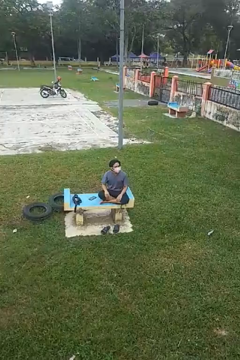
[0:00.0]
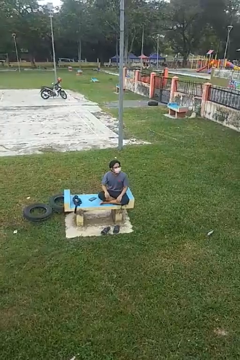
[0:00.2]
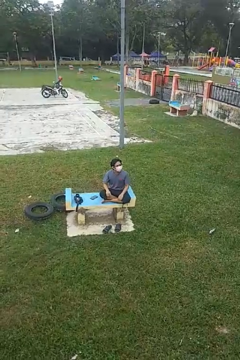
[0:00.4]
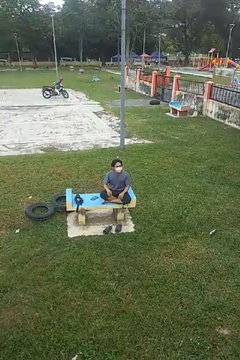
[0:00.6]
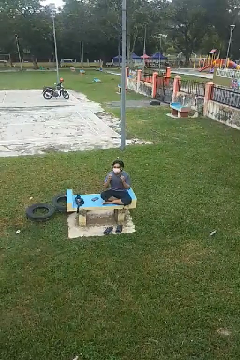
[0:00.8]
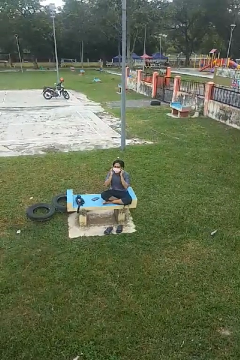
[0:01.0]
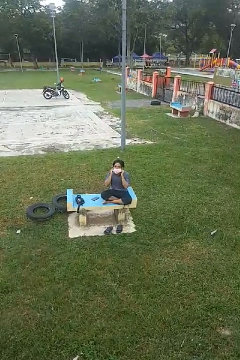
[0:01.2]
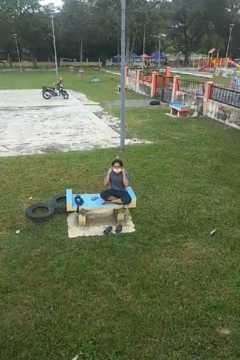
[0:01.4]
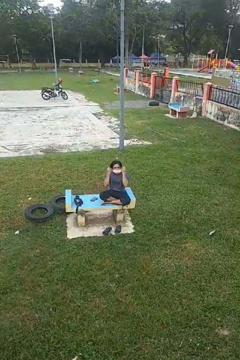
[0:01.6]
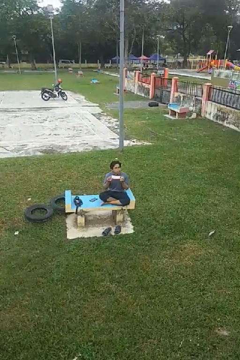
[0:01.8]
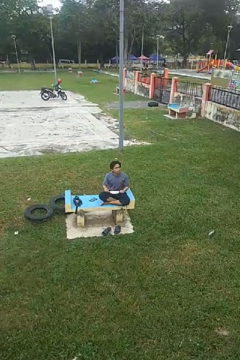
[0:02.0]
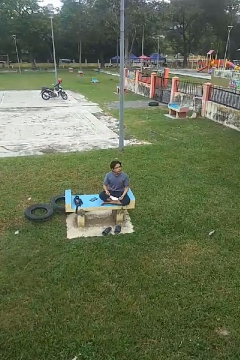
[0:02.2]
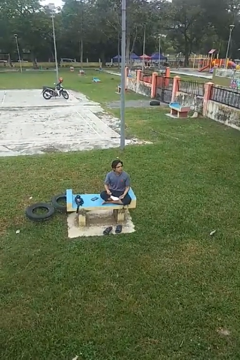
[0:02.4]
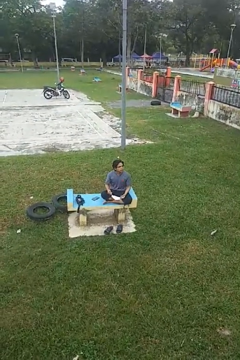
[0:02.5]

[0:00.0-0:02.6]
person takes off facemask

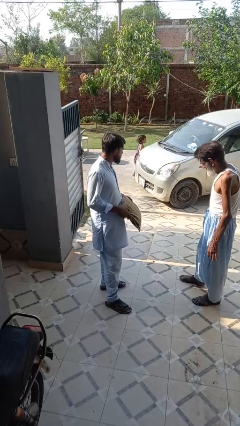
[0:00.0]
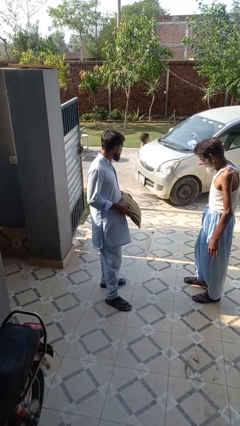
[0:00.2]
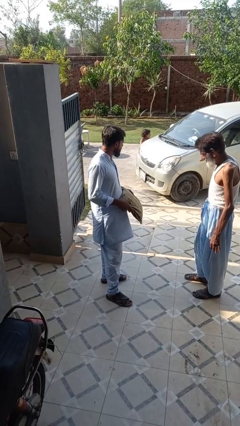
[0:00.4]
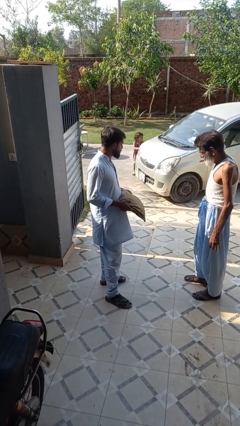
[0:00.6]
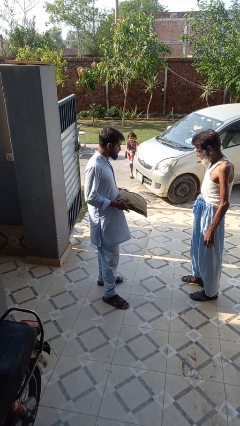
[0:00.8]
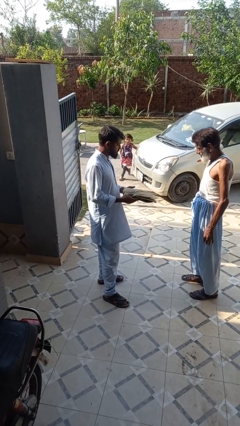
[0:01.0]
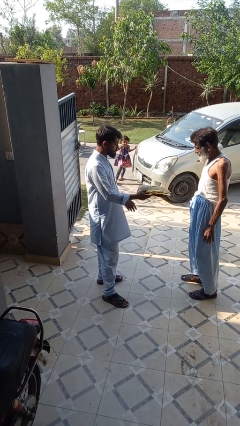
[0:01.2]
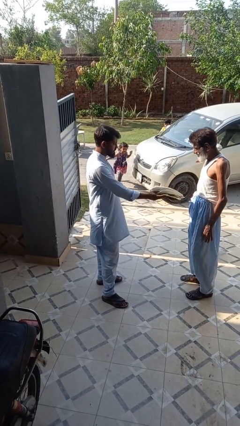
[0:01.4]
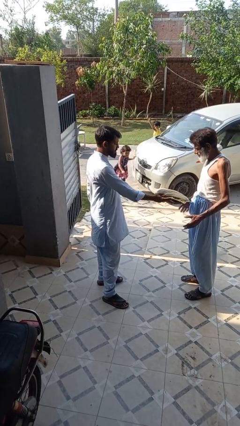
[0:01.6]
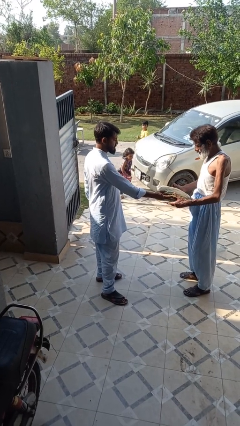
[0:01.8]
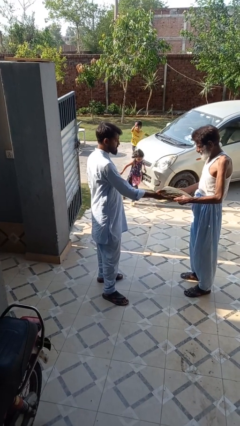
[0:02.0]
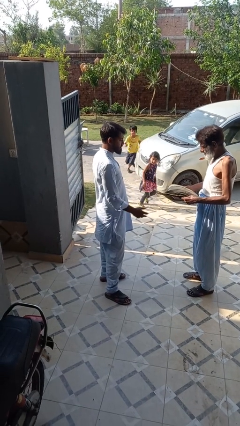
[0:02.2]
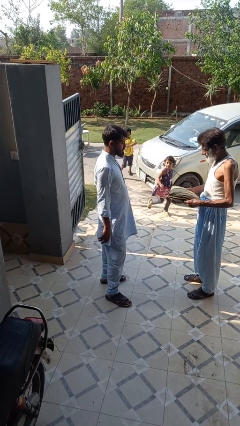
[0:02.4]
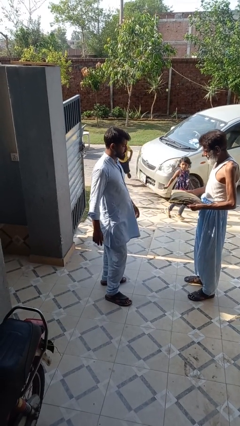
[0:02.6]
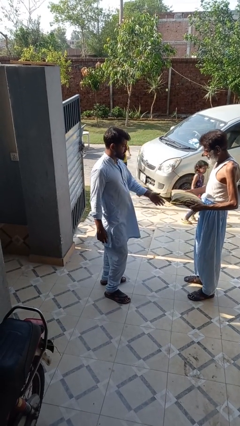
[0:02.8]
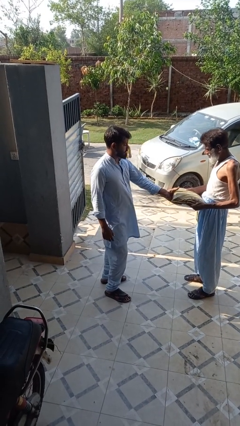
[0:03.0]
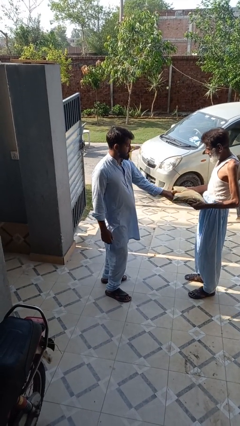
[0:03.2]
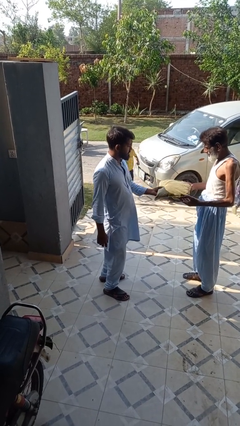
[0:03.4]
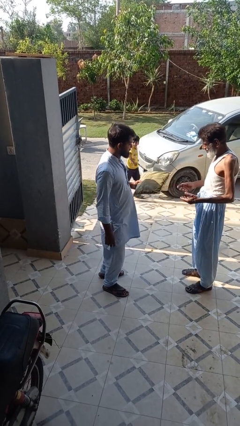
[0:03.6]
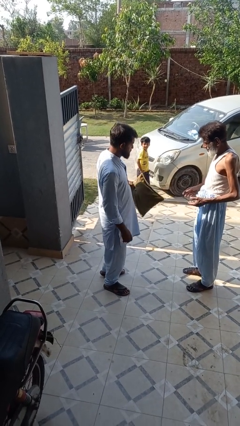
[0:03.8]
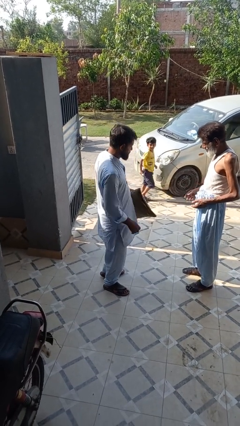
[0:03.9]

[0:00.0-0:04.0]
person transfers object to person

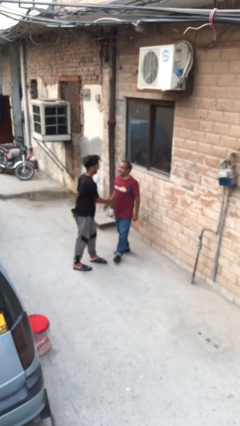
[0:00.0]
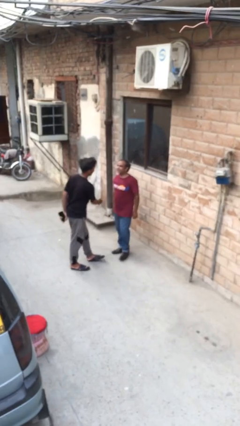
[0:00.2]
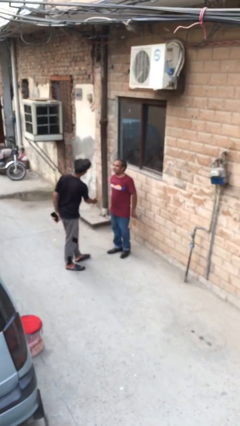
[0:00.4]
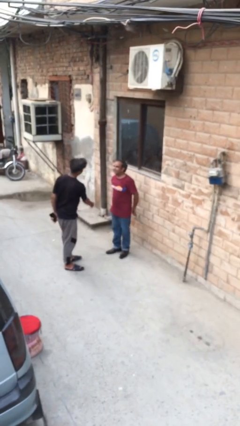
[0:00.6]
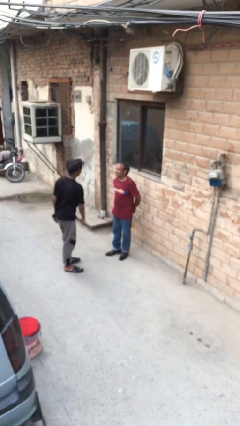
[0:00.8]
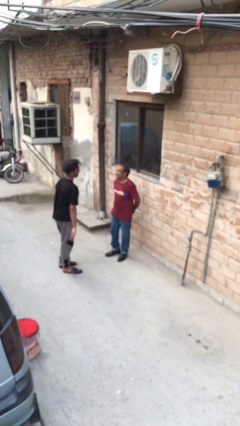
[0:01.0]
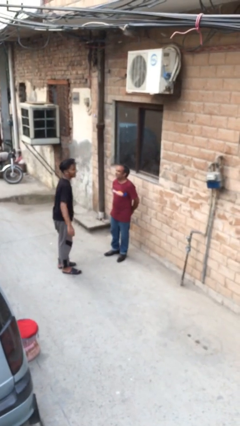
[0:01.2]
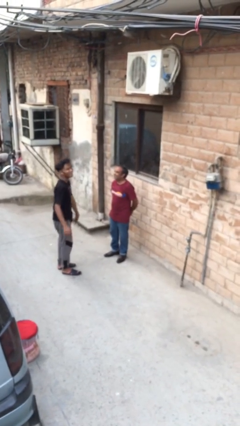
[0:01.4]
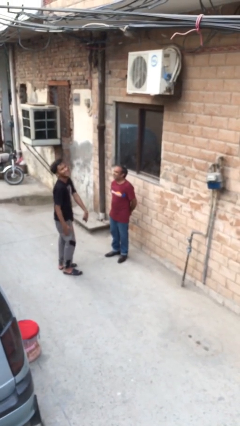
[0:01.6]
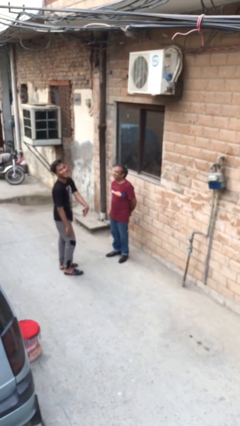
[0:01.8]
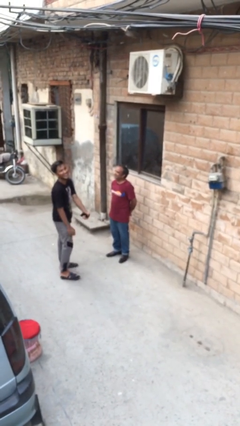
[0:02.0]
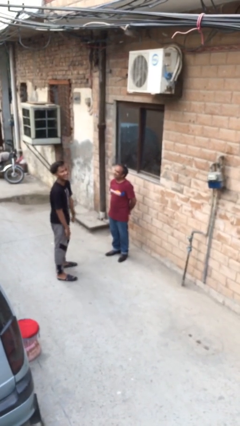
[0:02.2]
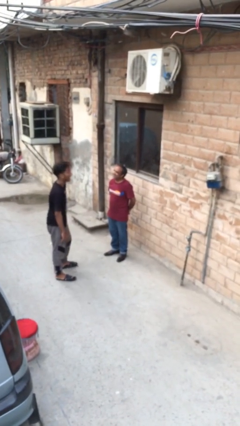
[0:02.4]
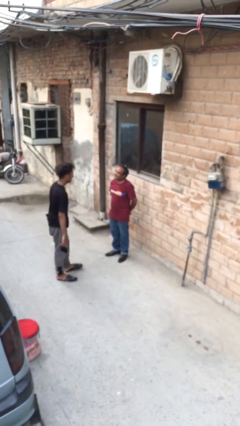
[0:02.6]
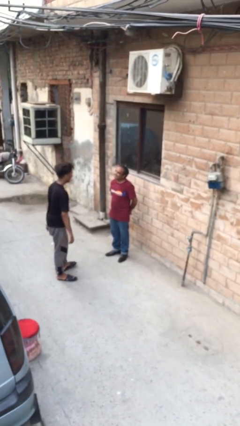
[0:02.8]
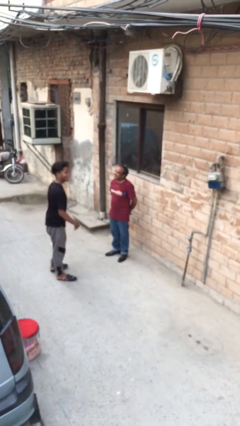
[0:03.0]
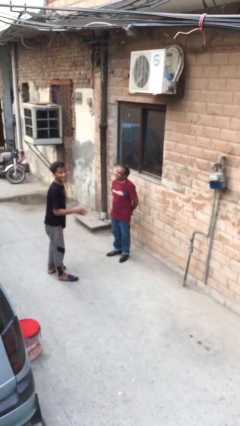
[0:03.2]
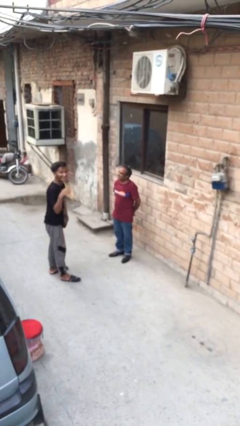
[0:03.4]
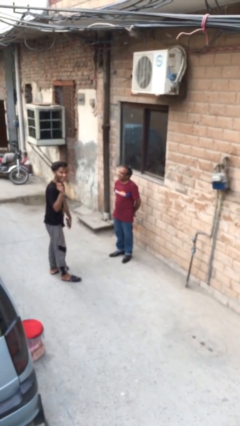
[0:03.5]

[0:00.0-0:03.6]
person talks to person

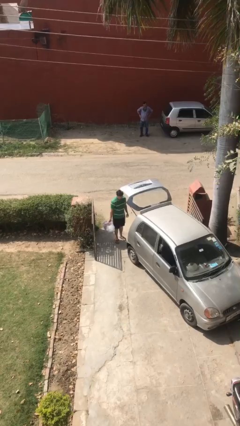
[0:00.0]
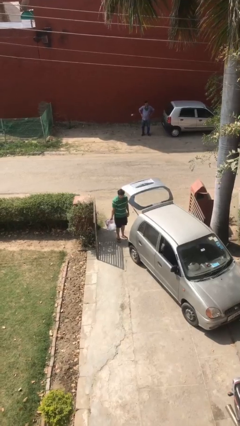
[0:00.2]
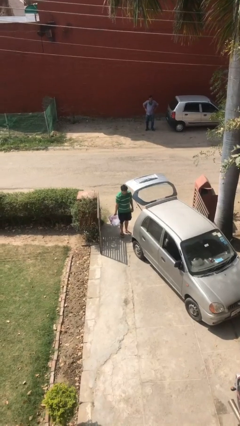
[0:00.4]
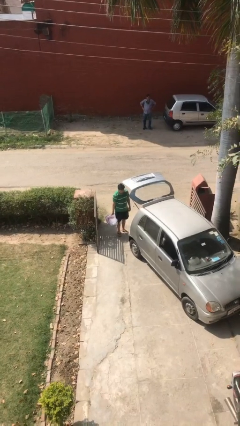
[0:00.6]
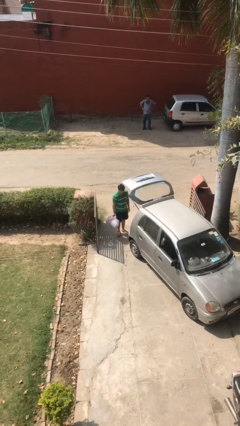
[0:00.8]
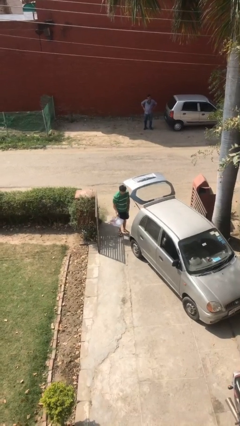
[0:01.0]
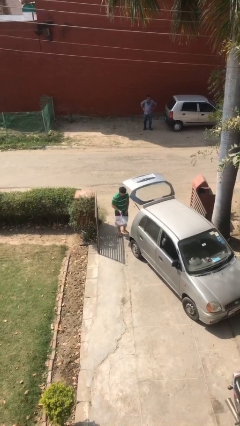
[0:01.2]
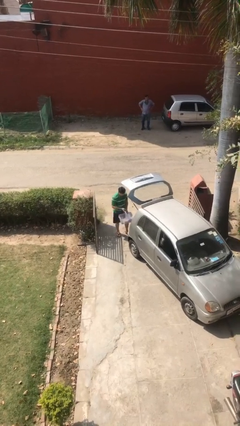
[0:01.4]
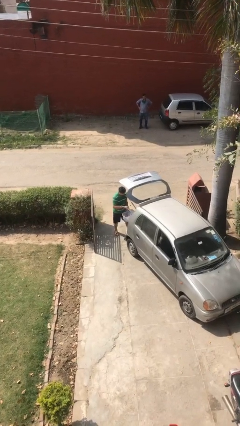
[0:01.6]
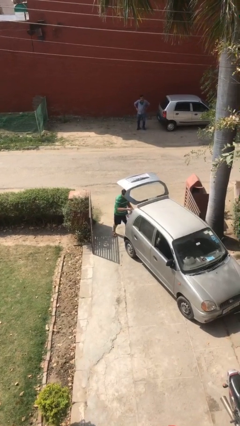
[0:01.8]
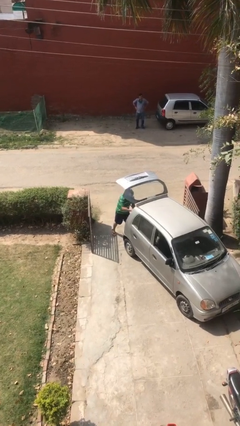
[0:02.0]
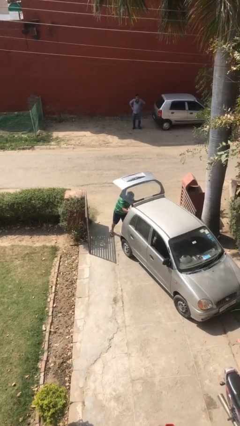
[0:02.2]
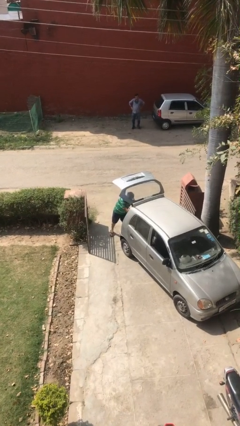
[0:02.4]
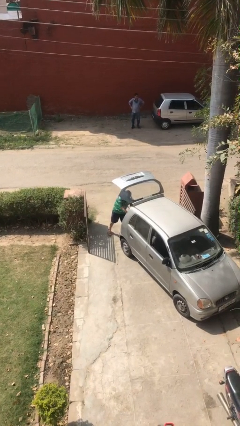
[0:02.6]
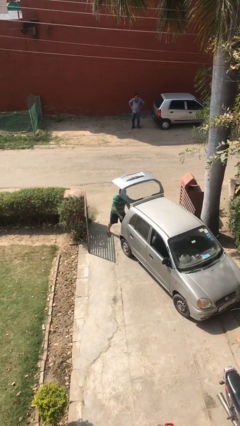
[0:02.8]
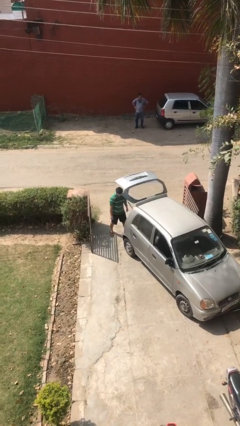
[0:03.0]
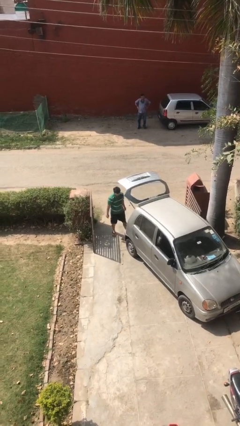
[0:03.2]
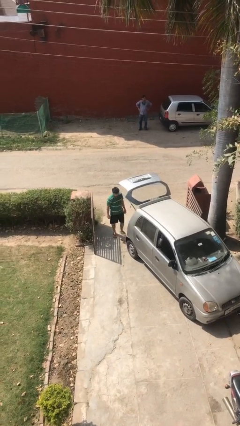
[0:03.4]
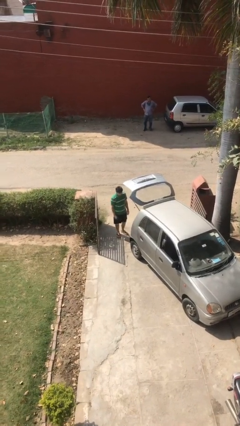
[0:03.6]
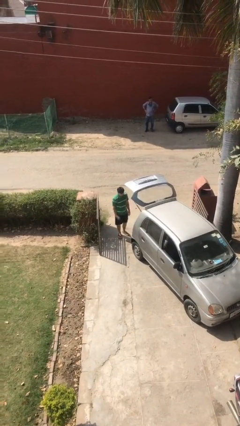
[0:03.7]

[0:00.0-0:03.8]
person loads car

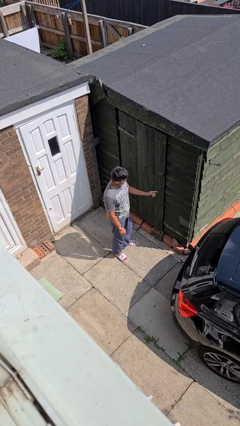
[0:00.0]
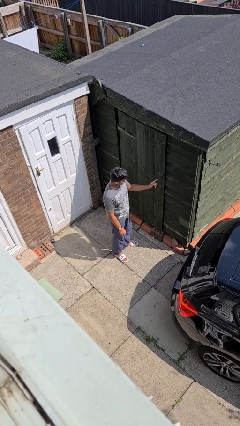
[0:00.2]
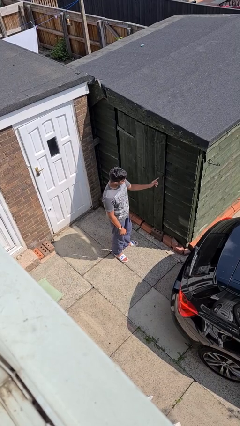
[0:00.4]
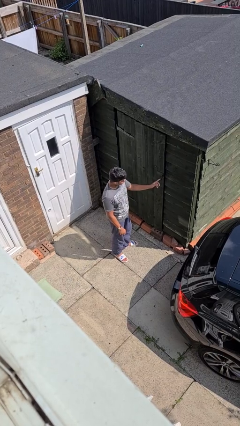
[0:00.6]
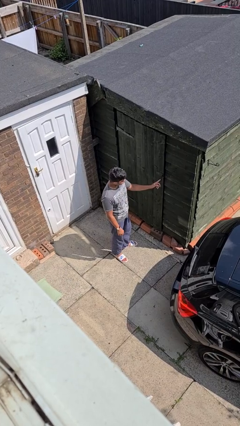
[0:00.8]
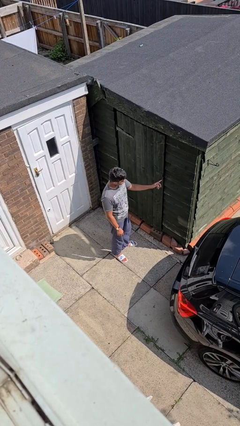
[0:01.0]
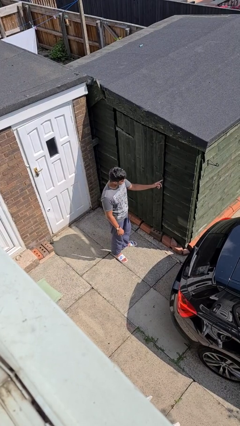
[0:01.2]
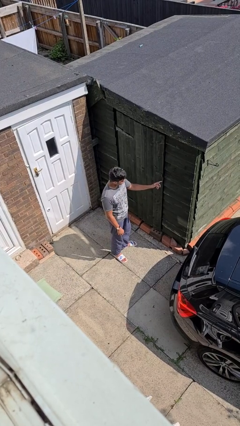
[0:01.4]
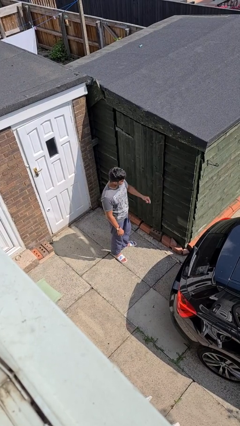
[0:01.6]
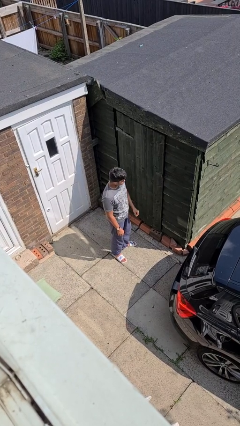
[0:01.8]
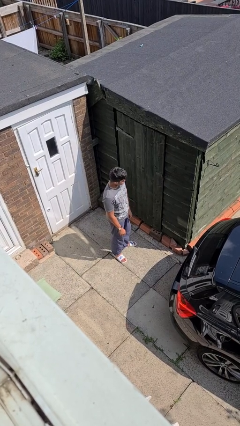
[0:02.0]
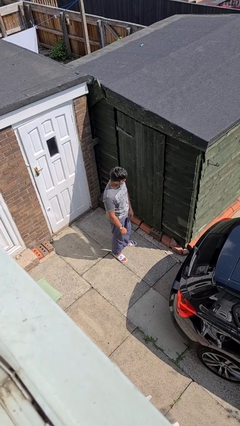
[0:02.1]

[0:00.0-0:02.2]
person taps object with finger

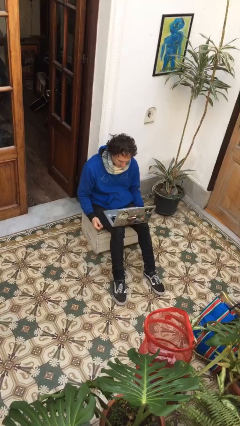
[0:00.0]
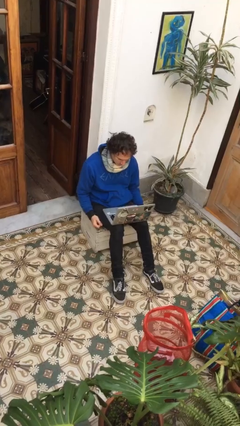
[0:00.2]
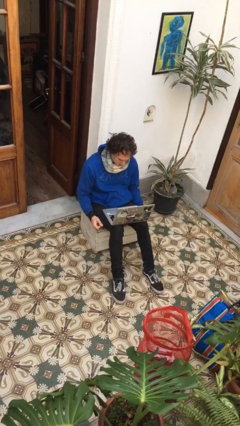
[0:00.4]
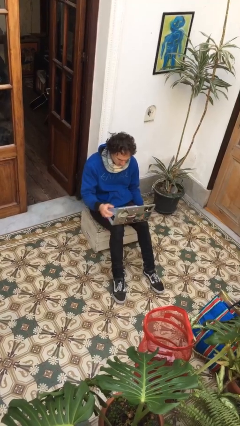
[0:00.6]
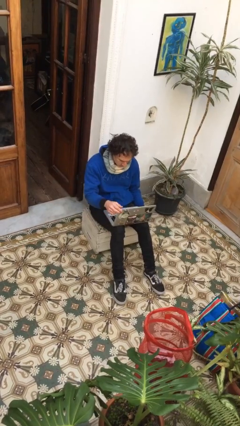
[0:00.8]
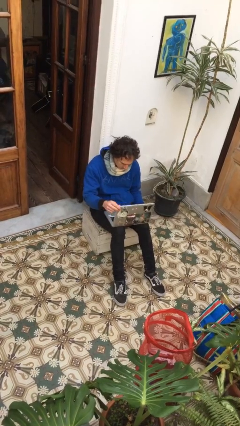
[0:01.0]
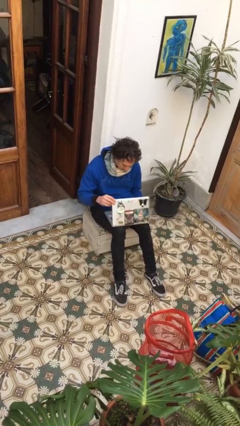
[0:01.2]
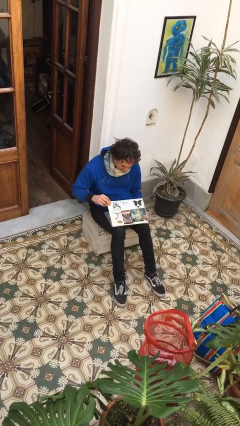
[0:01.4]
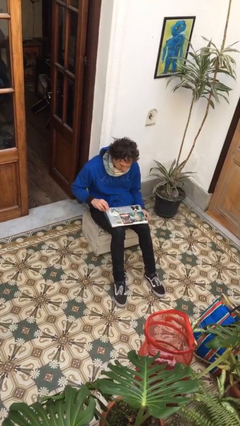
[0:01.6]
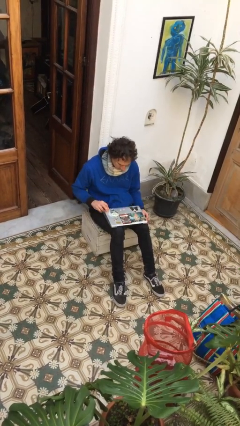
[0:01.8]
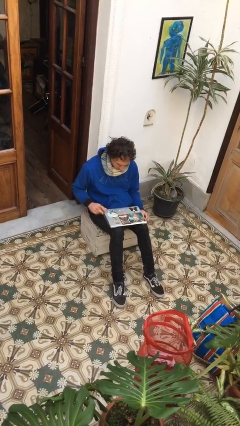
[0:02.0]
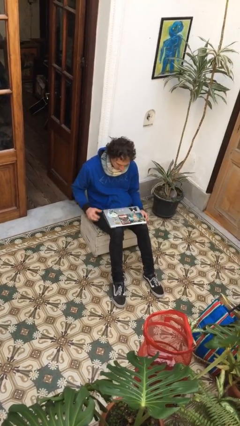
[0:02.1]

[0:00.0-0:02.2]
person closes laptop
